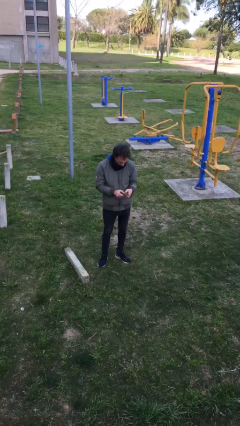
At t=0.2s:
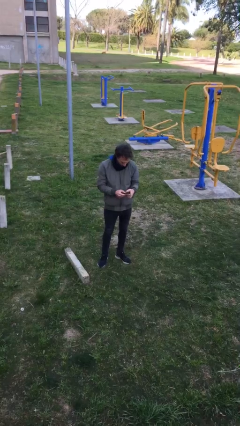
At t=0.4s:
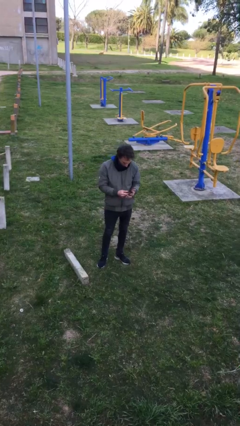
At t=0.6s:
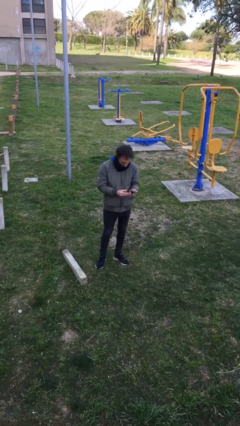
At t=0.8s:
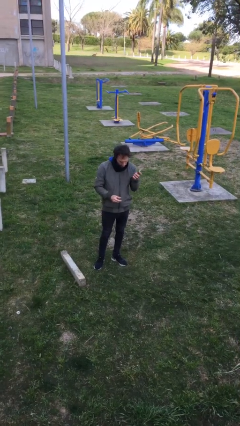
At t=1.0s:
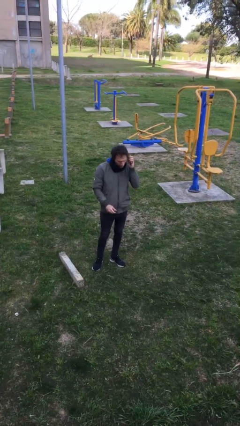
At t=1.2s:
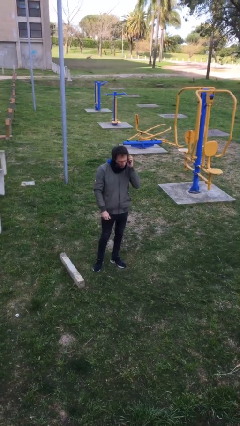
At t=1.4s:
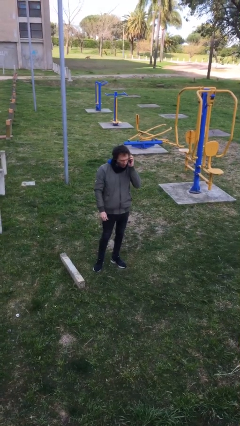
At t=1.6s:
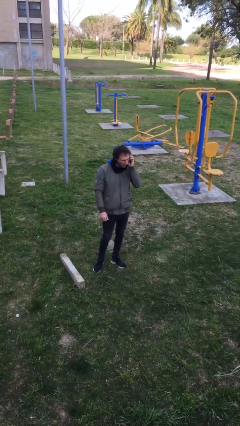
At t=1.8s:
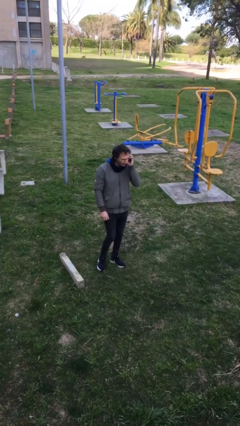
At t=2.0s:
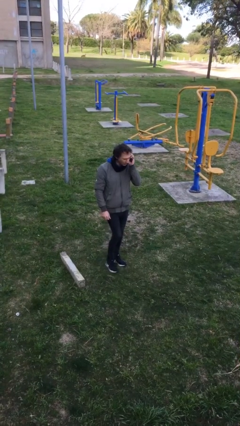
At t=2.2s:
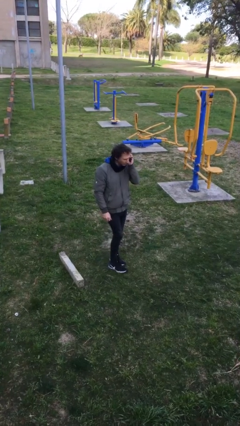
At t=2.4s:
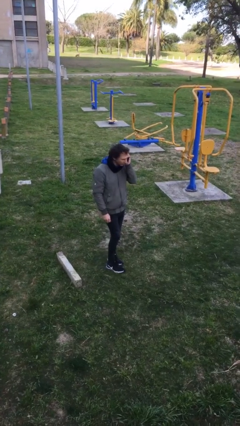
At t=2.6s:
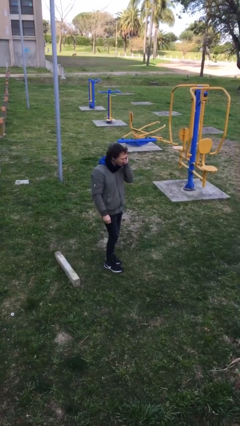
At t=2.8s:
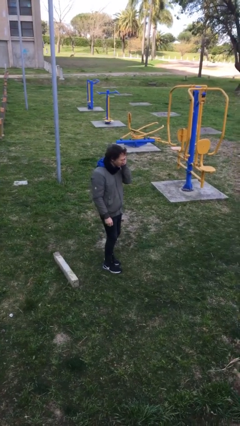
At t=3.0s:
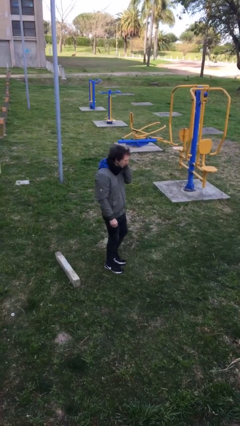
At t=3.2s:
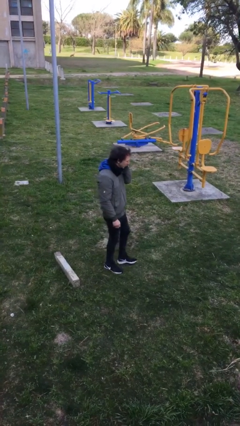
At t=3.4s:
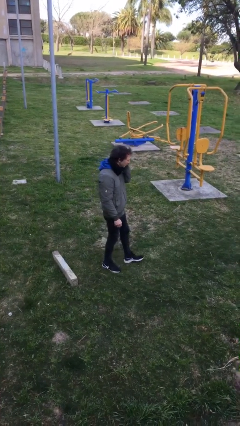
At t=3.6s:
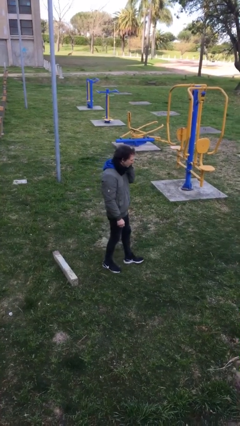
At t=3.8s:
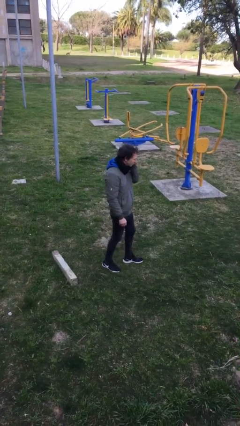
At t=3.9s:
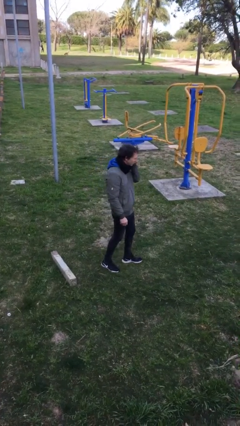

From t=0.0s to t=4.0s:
person talks on phone

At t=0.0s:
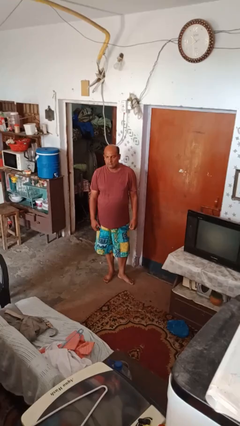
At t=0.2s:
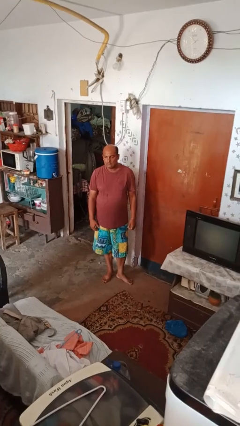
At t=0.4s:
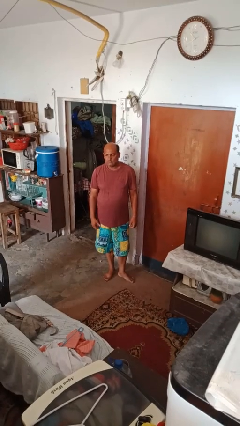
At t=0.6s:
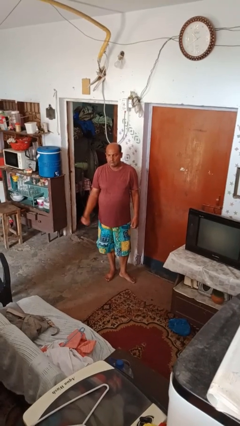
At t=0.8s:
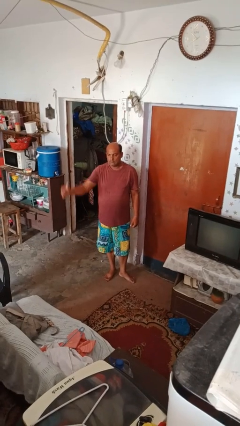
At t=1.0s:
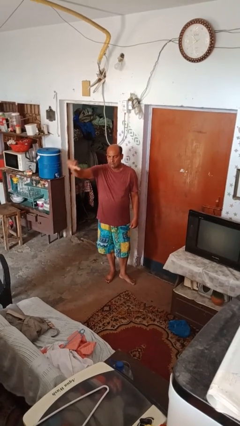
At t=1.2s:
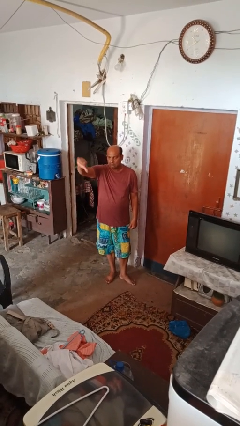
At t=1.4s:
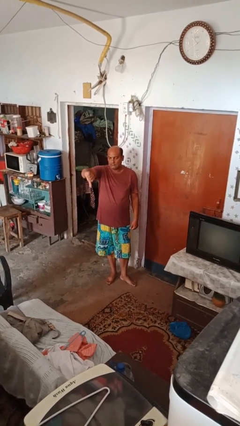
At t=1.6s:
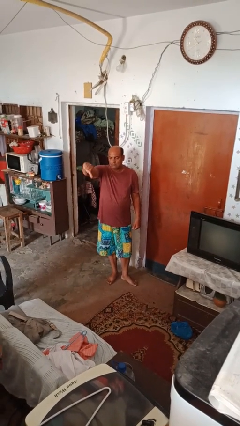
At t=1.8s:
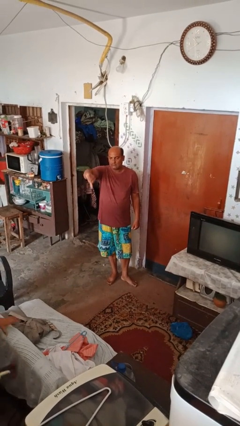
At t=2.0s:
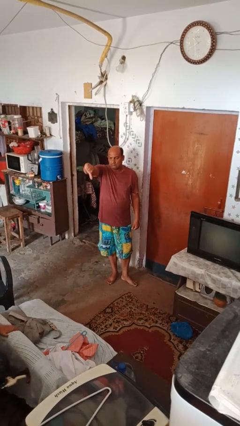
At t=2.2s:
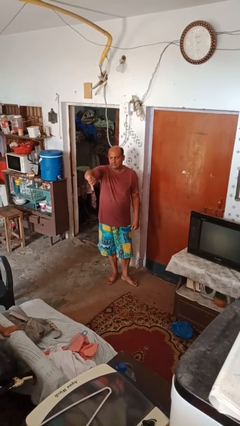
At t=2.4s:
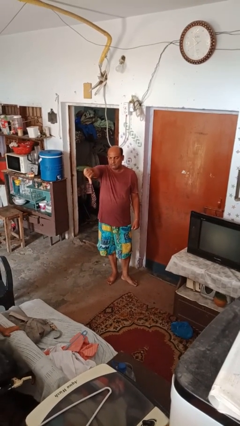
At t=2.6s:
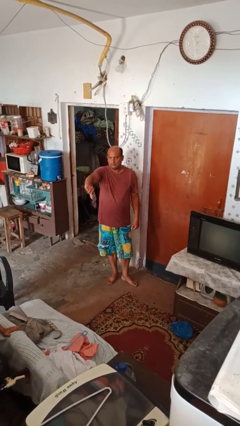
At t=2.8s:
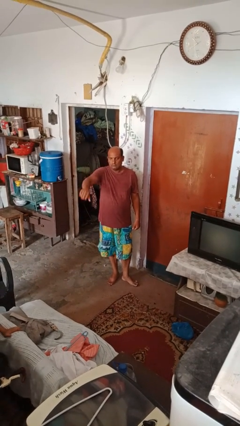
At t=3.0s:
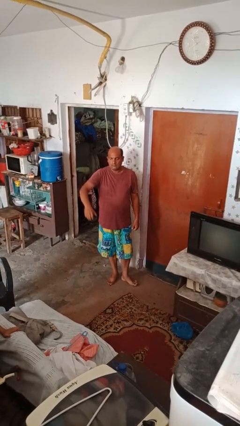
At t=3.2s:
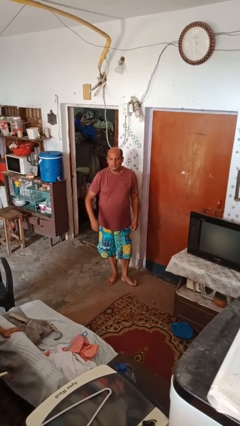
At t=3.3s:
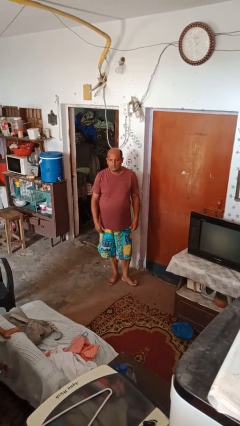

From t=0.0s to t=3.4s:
person gestures thumbs down

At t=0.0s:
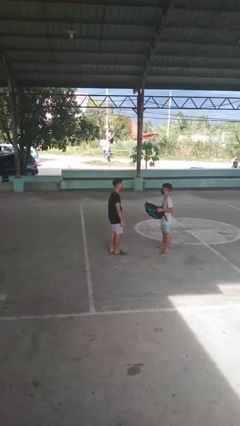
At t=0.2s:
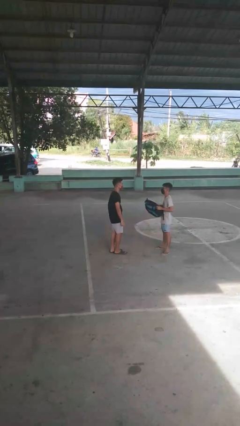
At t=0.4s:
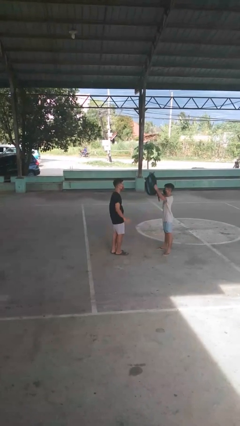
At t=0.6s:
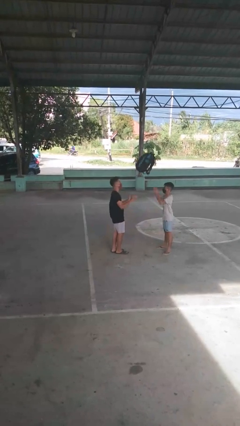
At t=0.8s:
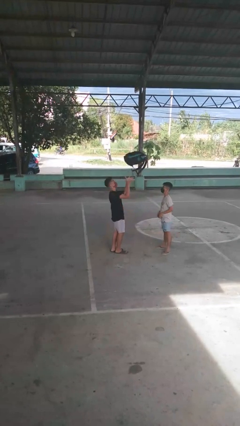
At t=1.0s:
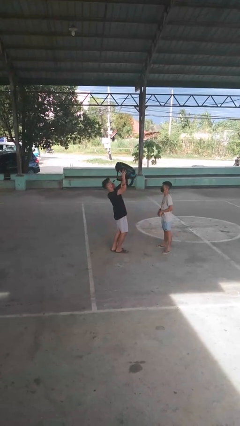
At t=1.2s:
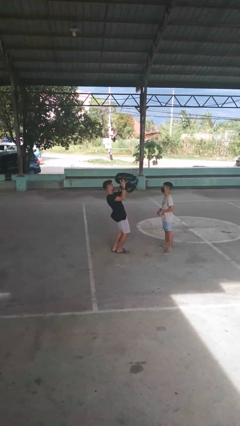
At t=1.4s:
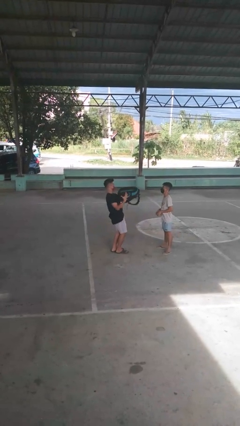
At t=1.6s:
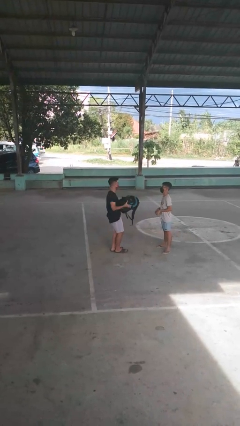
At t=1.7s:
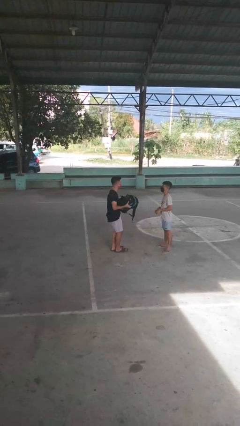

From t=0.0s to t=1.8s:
person catches object from person

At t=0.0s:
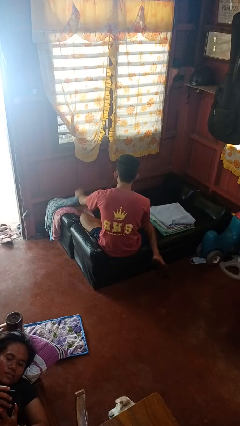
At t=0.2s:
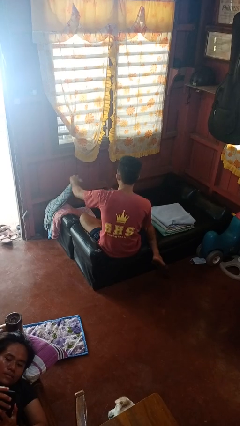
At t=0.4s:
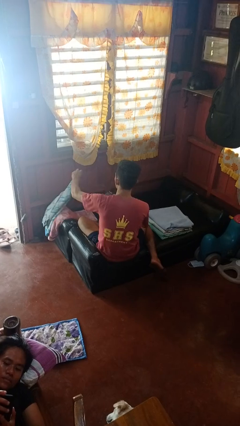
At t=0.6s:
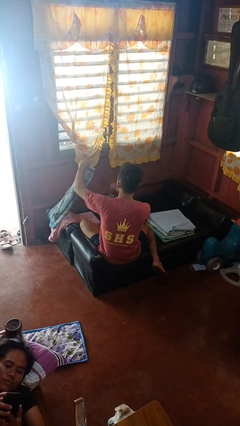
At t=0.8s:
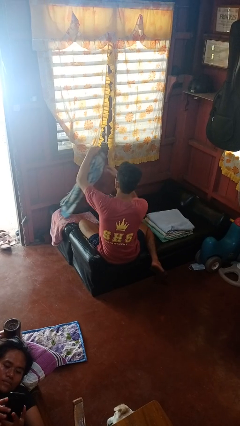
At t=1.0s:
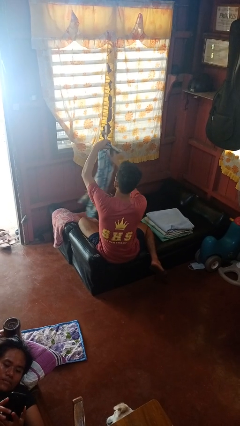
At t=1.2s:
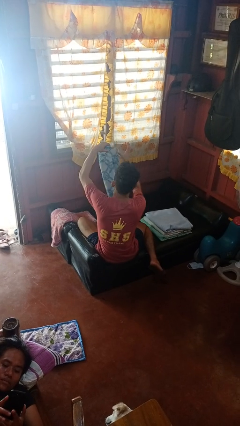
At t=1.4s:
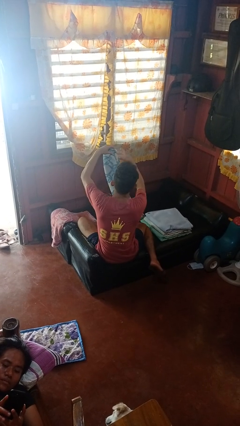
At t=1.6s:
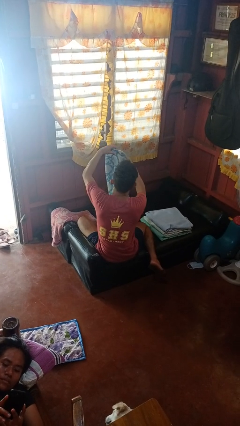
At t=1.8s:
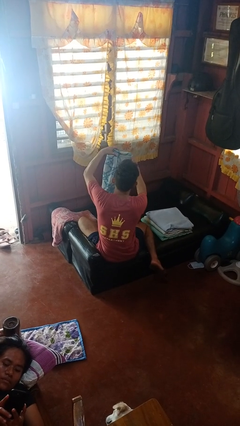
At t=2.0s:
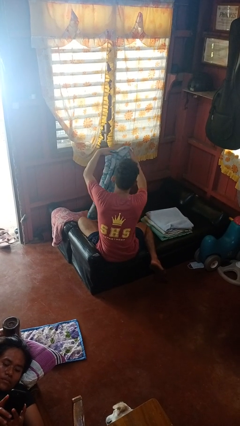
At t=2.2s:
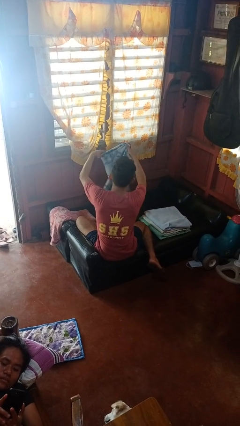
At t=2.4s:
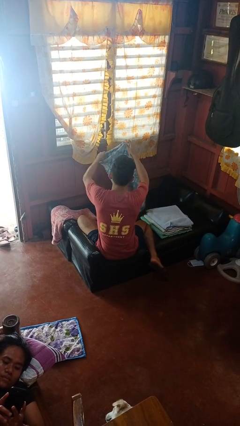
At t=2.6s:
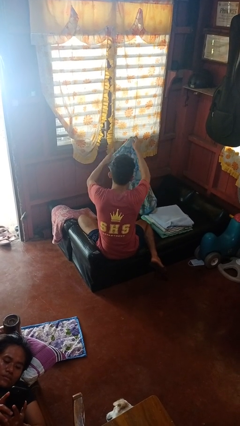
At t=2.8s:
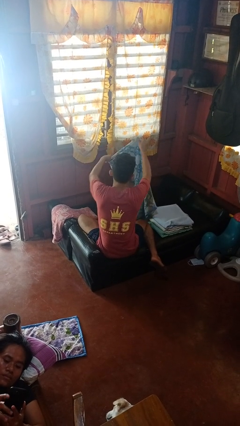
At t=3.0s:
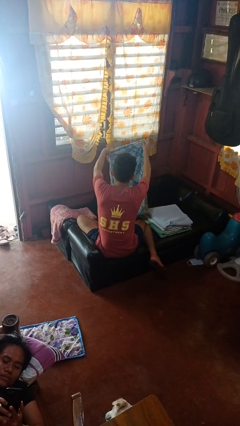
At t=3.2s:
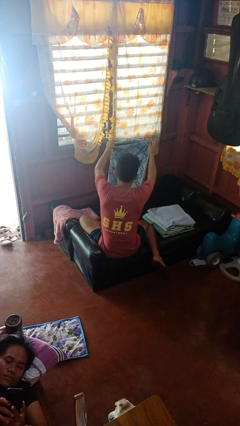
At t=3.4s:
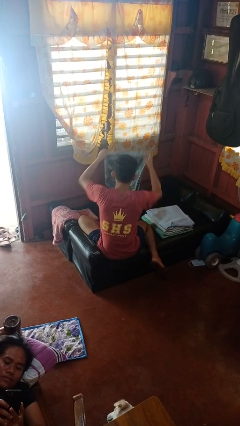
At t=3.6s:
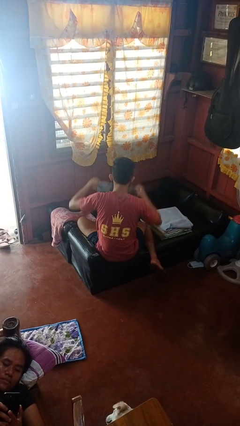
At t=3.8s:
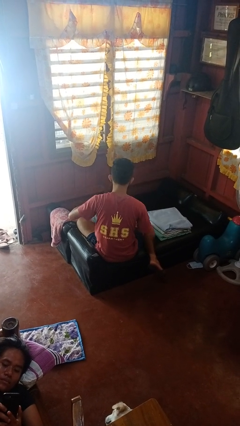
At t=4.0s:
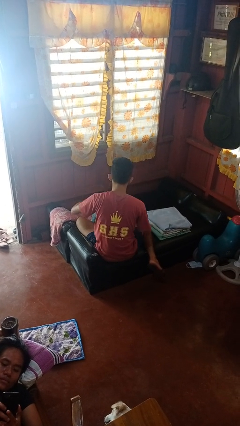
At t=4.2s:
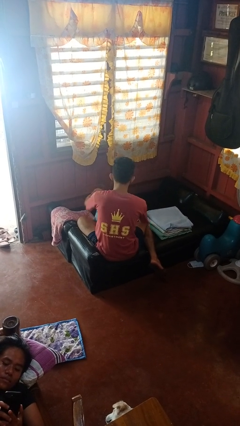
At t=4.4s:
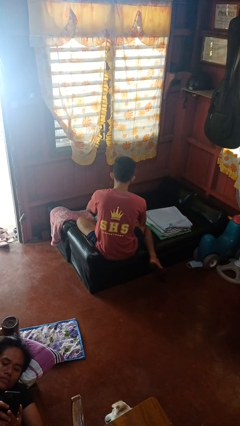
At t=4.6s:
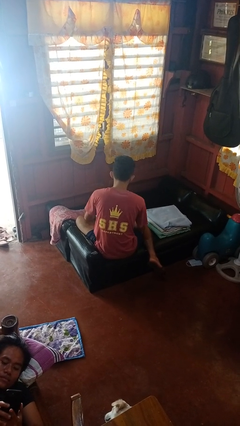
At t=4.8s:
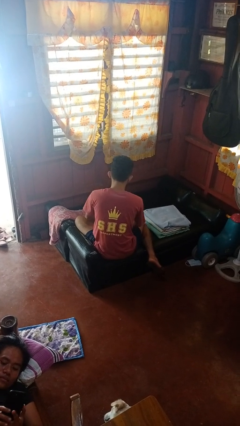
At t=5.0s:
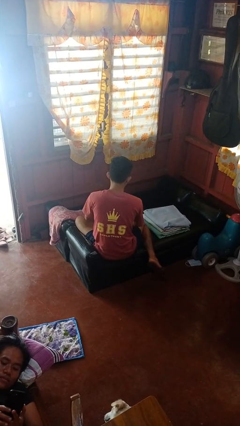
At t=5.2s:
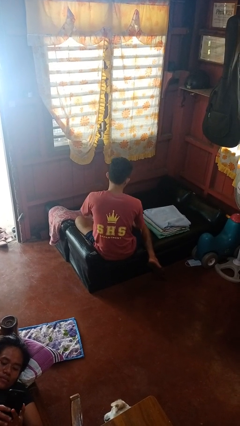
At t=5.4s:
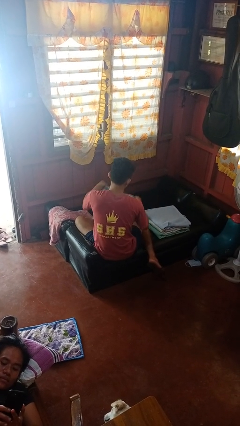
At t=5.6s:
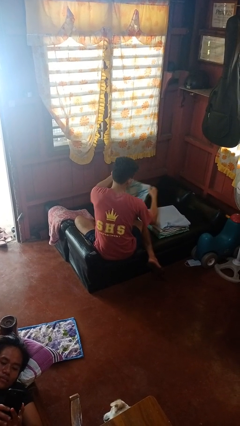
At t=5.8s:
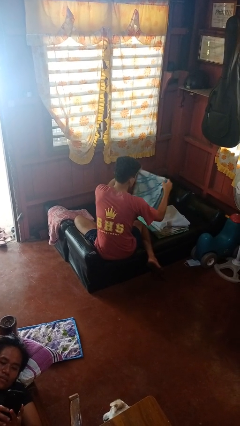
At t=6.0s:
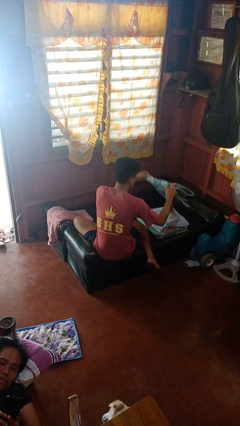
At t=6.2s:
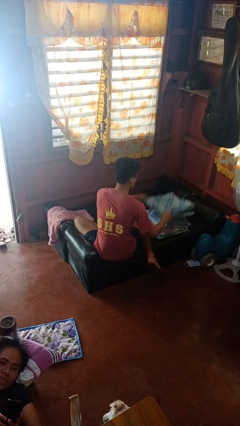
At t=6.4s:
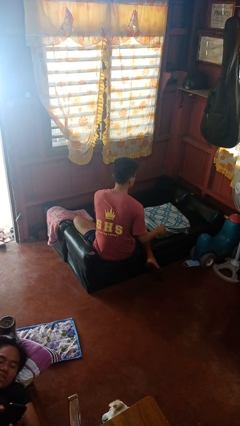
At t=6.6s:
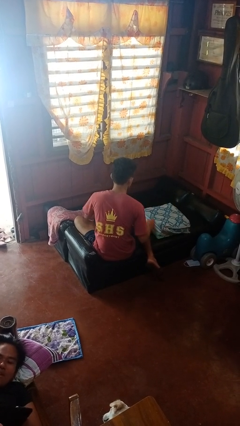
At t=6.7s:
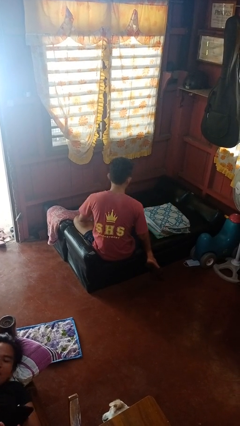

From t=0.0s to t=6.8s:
person folds towel

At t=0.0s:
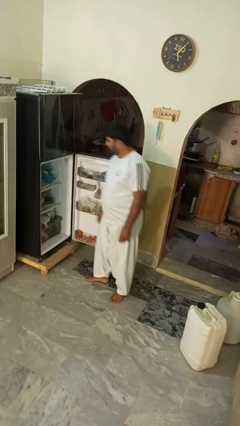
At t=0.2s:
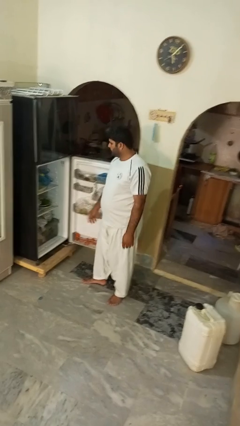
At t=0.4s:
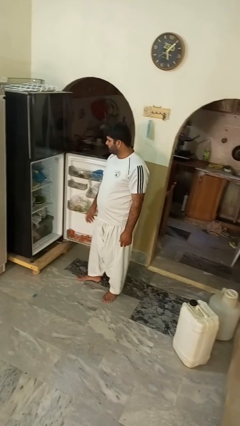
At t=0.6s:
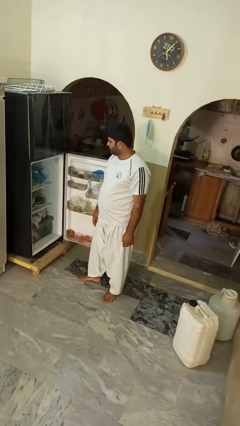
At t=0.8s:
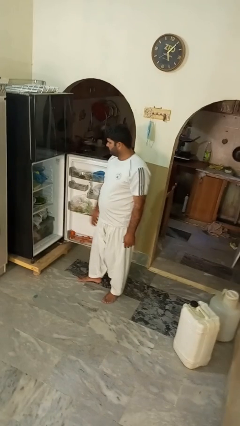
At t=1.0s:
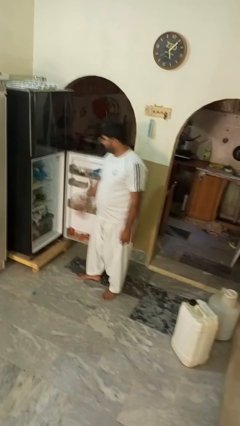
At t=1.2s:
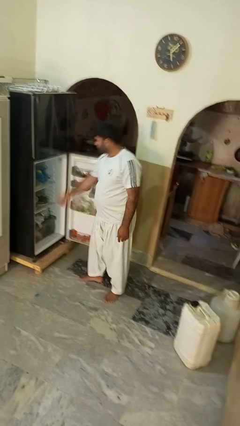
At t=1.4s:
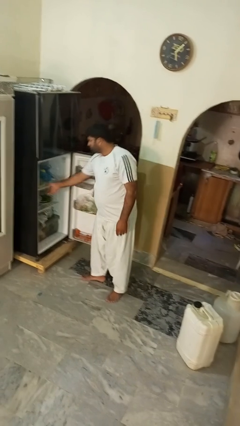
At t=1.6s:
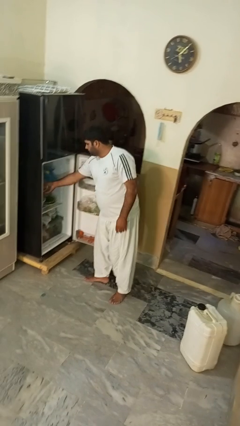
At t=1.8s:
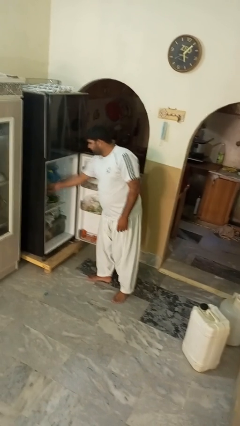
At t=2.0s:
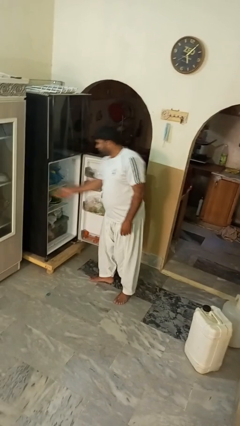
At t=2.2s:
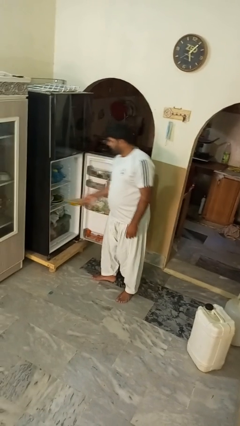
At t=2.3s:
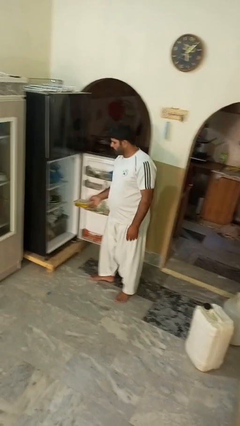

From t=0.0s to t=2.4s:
person takes object from refrigerator
